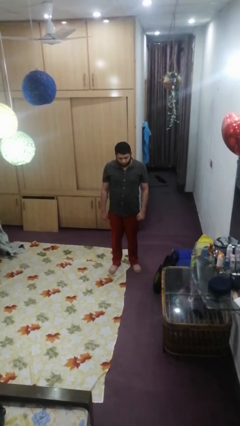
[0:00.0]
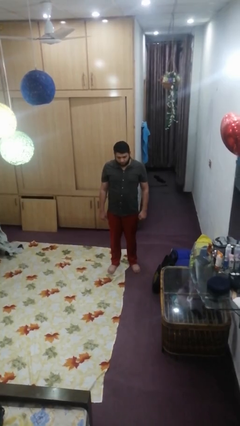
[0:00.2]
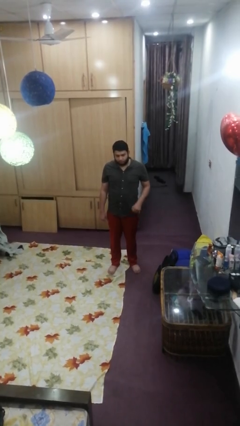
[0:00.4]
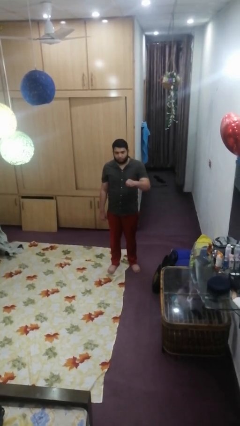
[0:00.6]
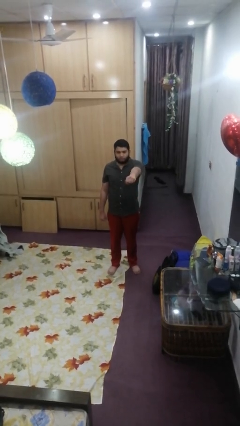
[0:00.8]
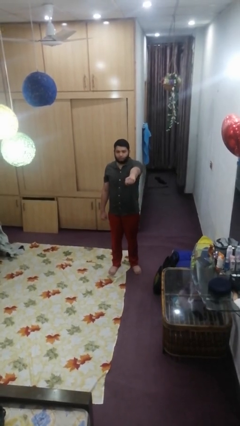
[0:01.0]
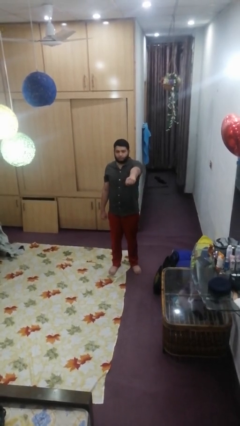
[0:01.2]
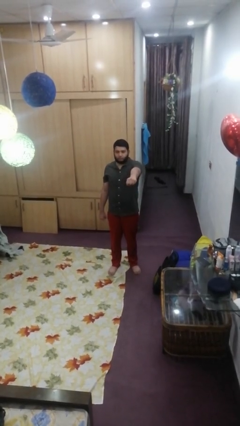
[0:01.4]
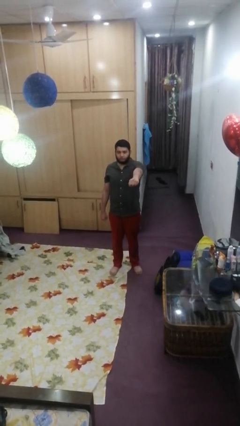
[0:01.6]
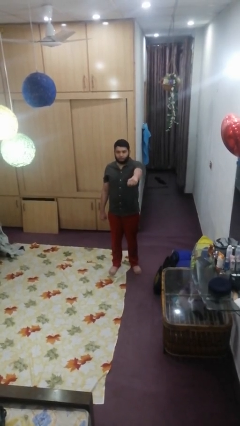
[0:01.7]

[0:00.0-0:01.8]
person punches

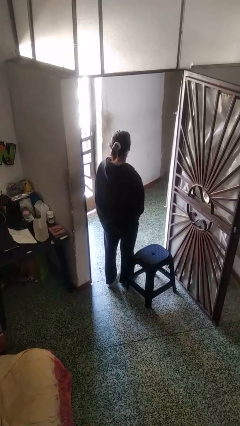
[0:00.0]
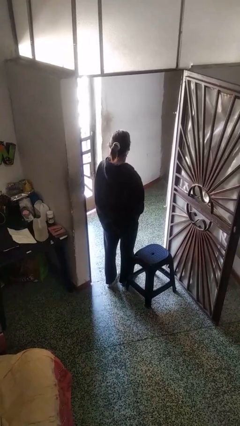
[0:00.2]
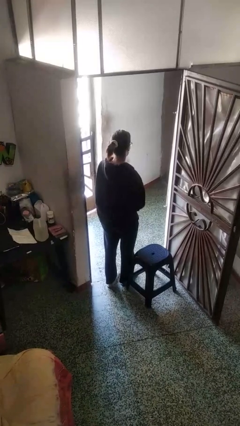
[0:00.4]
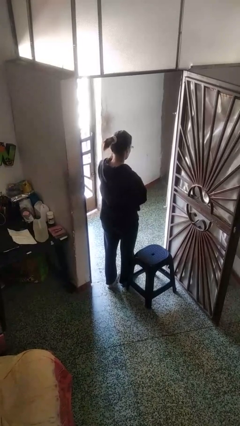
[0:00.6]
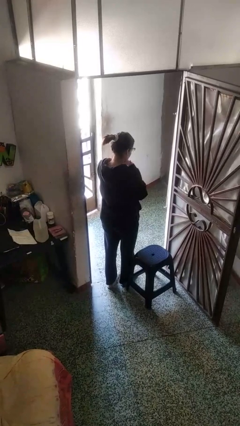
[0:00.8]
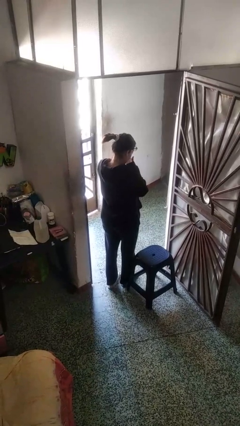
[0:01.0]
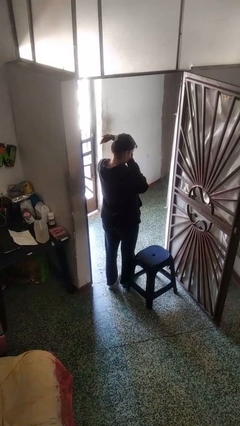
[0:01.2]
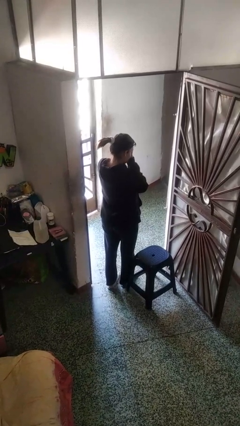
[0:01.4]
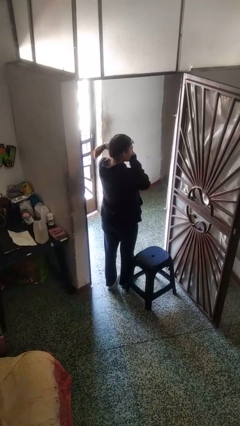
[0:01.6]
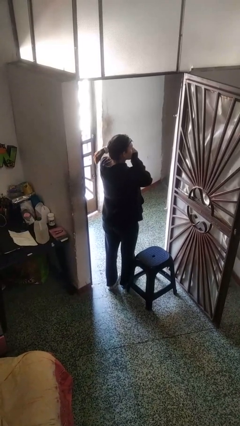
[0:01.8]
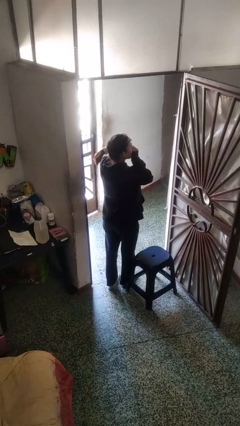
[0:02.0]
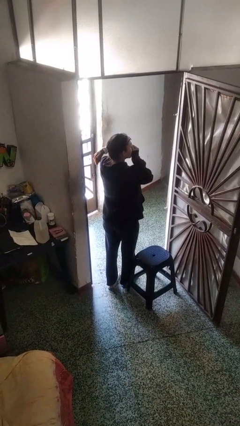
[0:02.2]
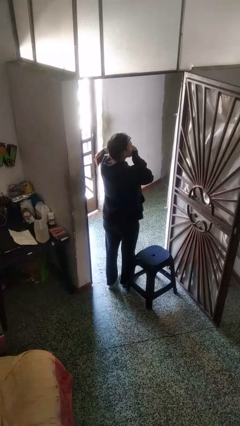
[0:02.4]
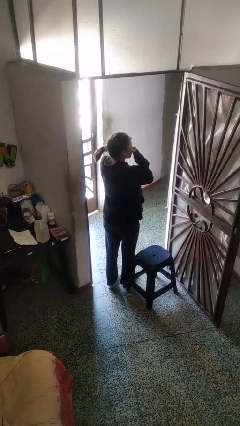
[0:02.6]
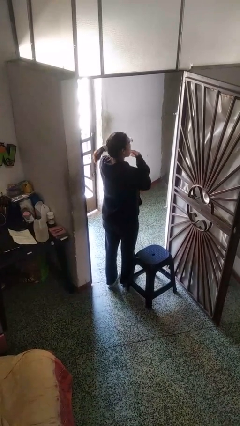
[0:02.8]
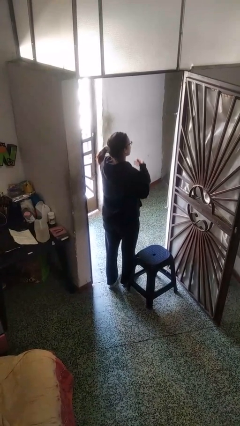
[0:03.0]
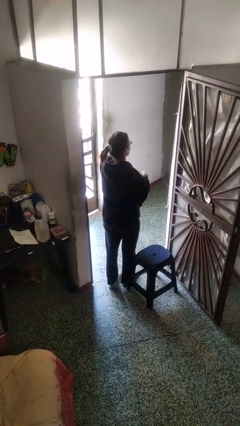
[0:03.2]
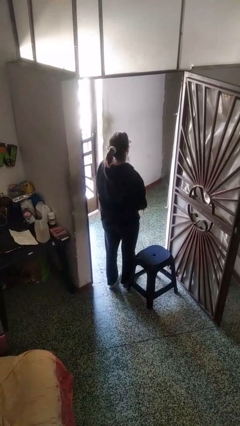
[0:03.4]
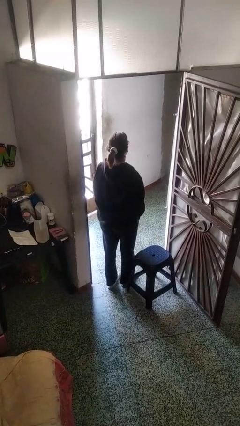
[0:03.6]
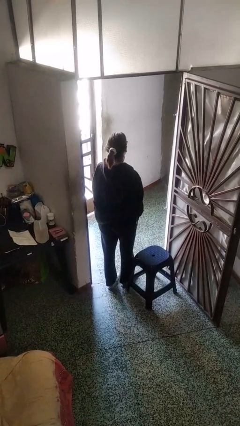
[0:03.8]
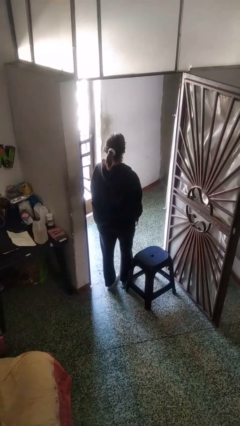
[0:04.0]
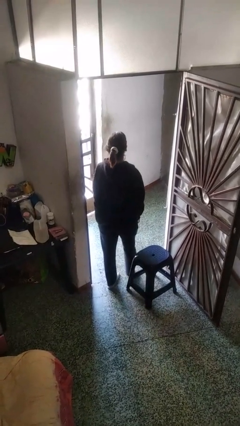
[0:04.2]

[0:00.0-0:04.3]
person rubs eyes

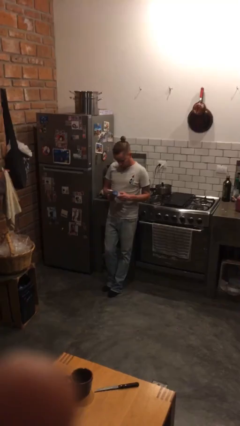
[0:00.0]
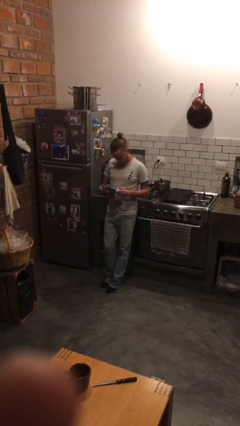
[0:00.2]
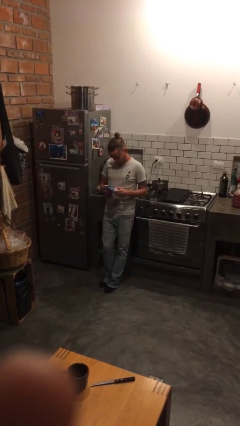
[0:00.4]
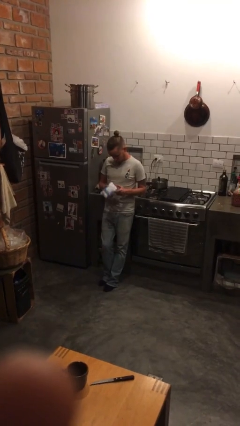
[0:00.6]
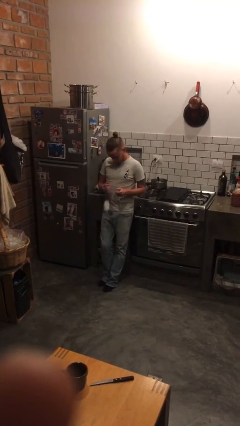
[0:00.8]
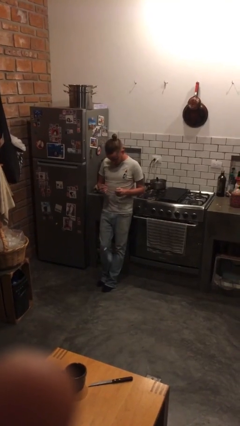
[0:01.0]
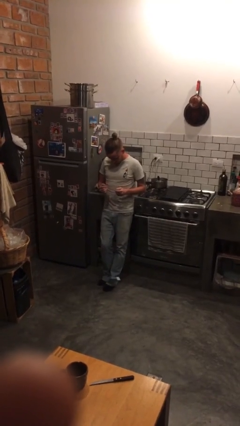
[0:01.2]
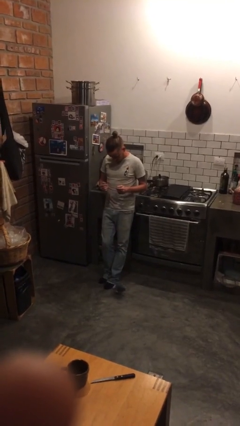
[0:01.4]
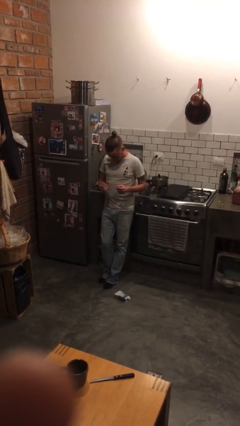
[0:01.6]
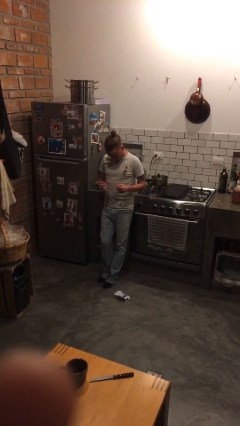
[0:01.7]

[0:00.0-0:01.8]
person drops object

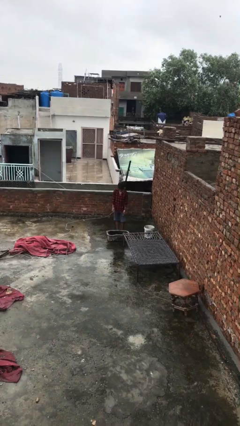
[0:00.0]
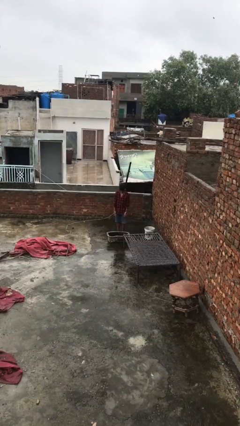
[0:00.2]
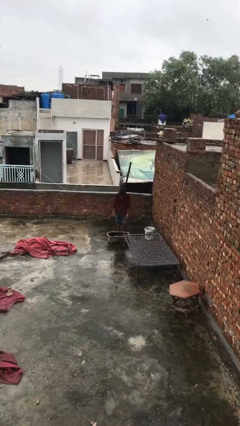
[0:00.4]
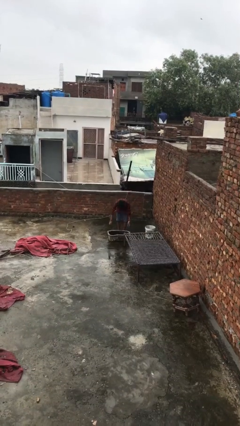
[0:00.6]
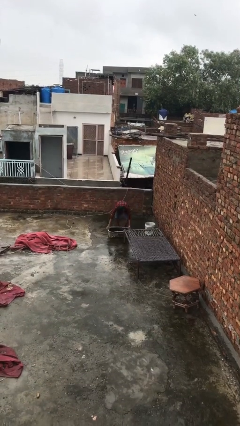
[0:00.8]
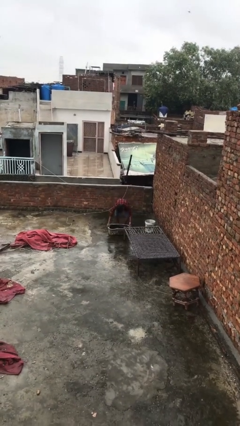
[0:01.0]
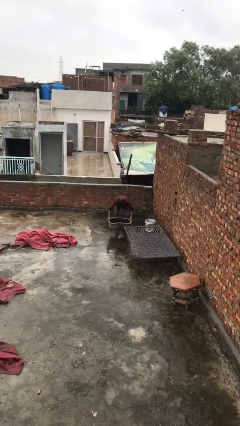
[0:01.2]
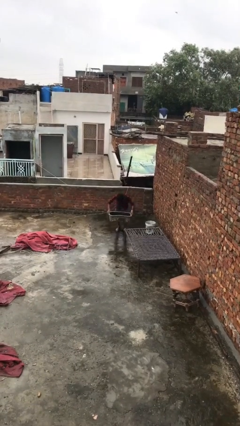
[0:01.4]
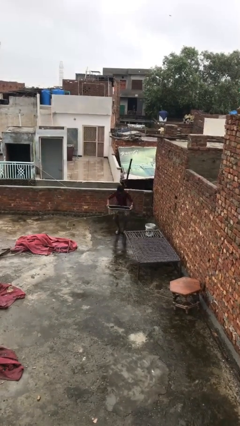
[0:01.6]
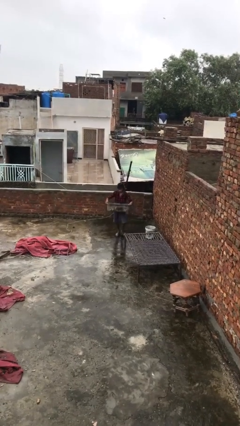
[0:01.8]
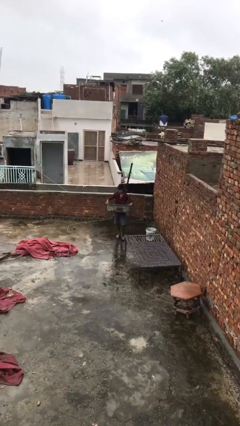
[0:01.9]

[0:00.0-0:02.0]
person picks up object from floor

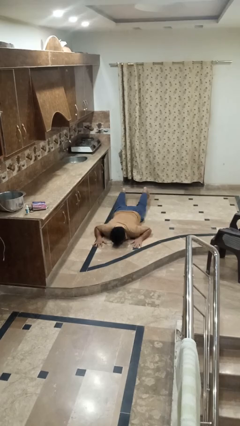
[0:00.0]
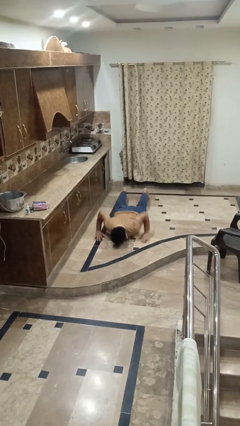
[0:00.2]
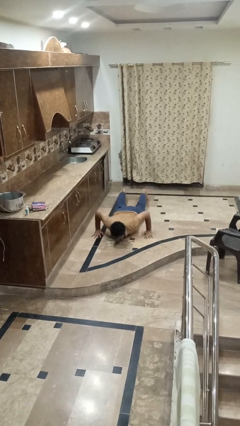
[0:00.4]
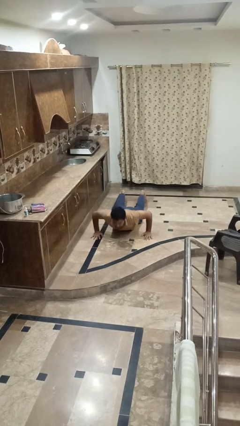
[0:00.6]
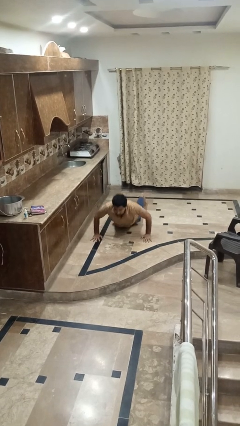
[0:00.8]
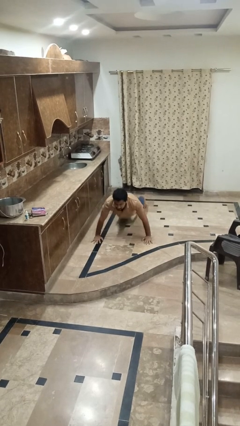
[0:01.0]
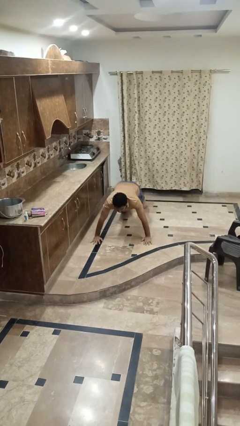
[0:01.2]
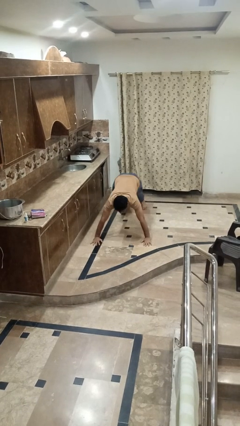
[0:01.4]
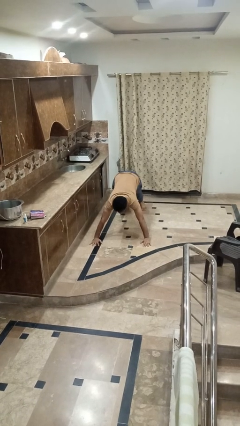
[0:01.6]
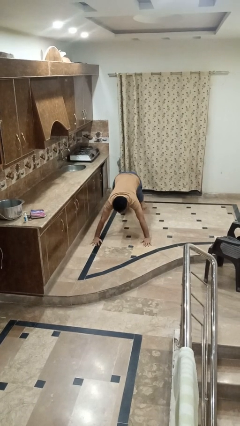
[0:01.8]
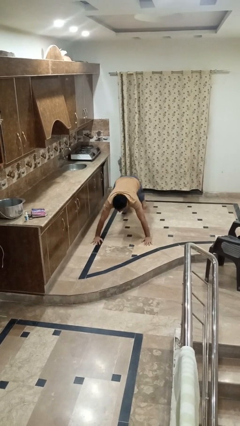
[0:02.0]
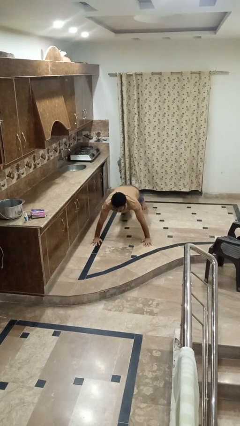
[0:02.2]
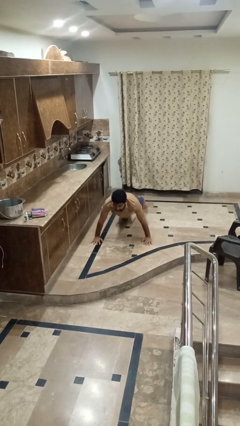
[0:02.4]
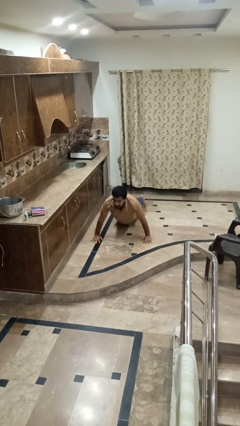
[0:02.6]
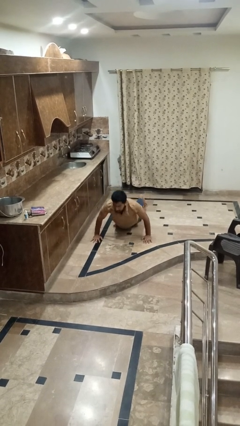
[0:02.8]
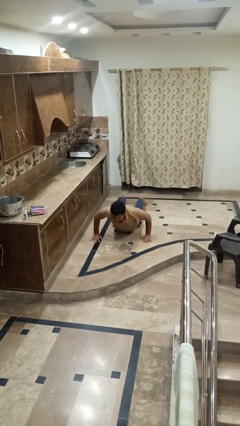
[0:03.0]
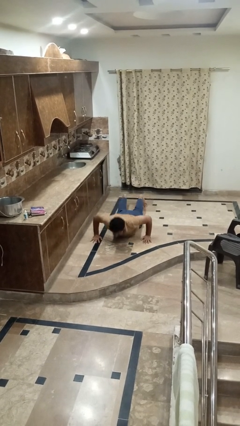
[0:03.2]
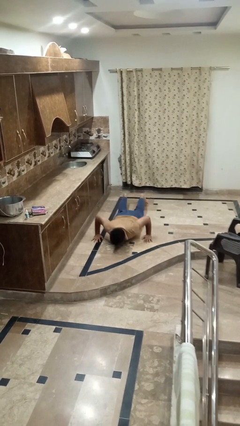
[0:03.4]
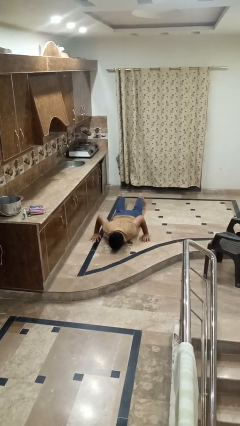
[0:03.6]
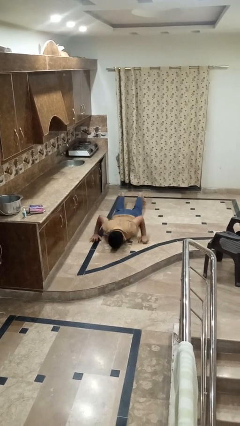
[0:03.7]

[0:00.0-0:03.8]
person exercises with pushup

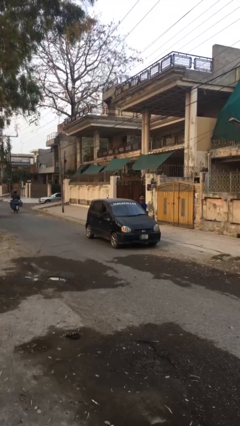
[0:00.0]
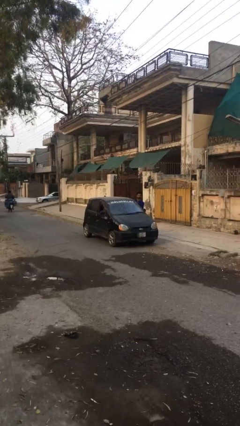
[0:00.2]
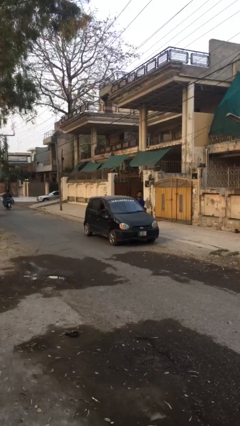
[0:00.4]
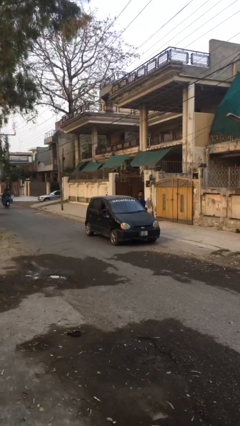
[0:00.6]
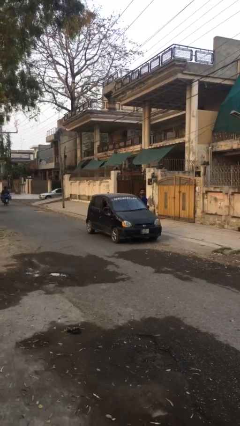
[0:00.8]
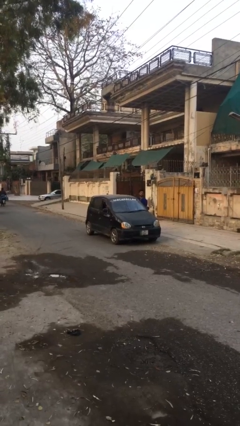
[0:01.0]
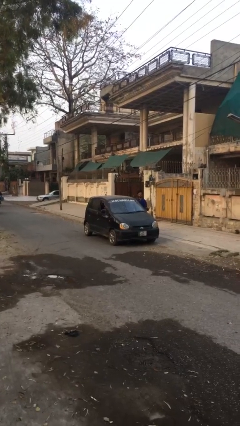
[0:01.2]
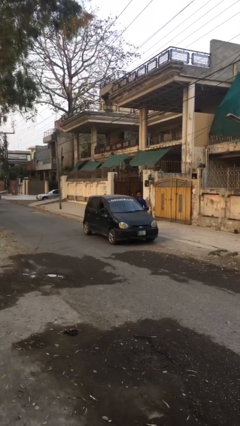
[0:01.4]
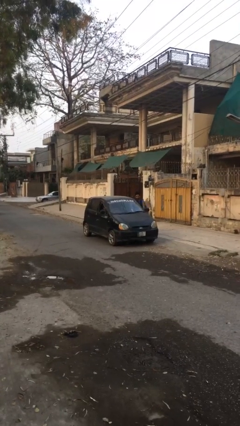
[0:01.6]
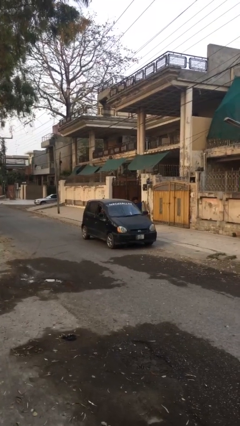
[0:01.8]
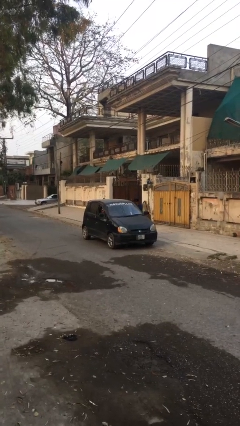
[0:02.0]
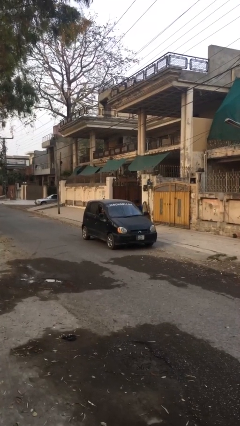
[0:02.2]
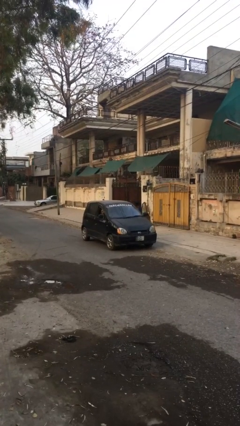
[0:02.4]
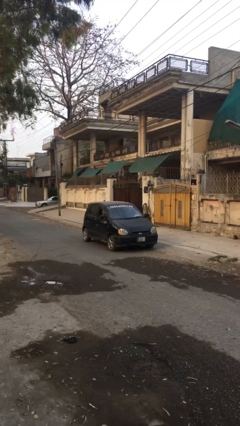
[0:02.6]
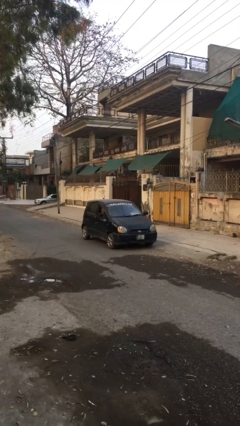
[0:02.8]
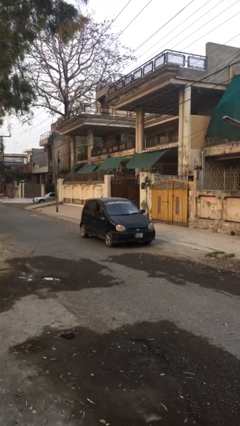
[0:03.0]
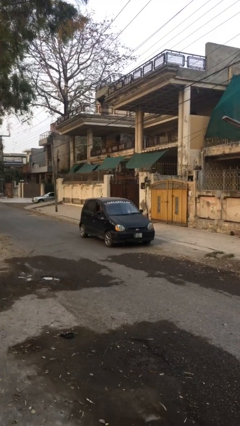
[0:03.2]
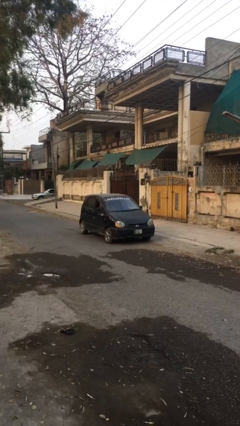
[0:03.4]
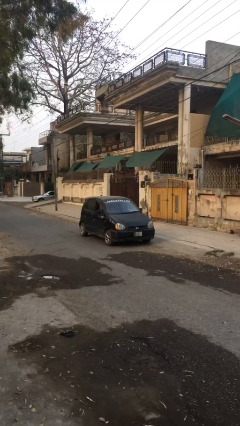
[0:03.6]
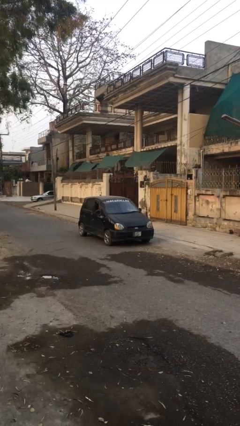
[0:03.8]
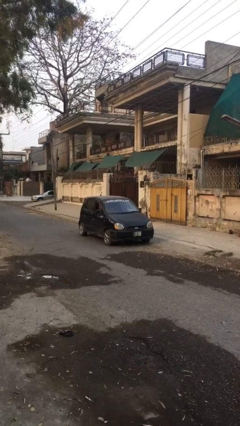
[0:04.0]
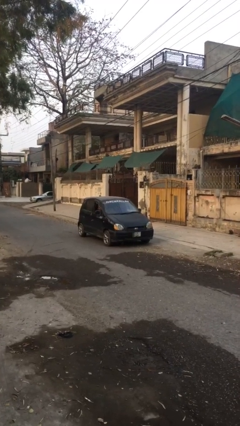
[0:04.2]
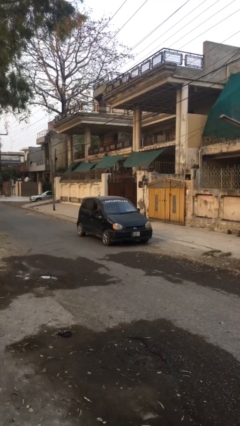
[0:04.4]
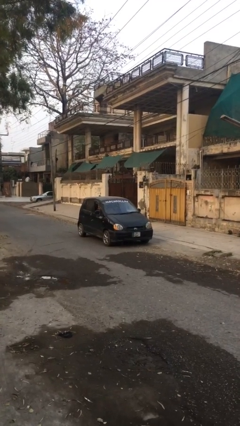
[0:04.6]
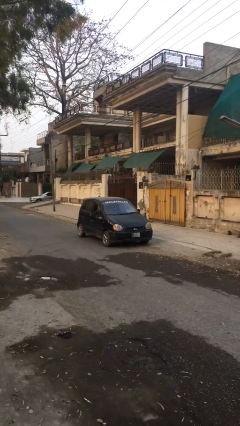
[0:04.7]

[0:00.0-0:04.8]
car picks up person
